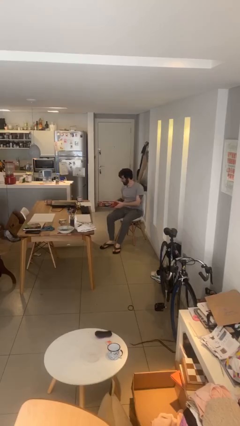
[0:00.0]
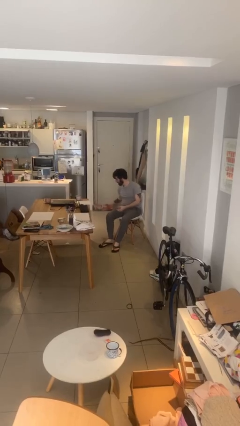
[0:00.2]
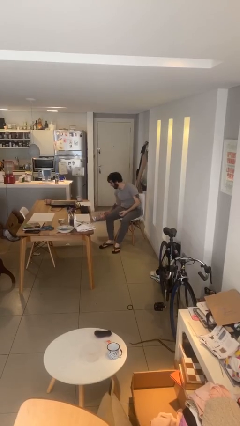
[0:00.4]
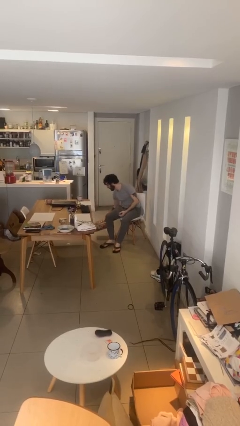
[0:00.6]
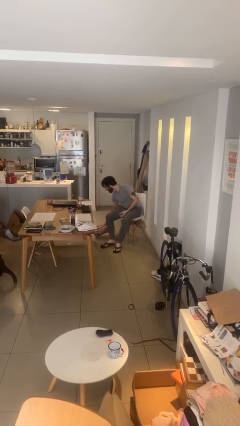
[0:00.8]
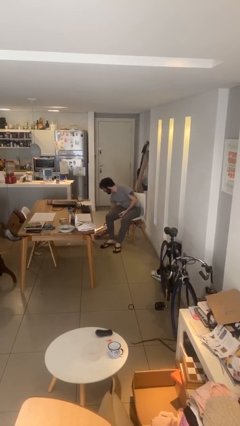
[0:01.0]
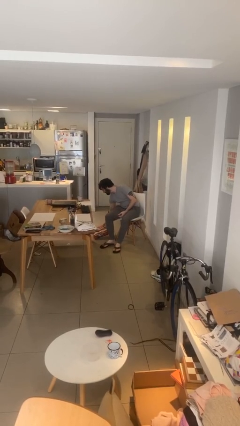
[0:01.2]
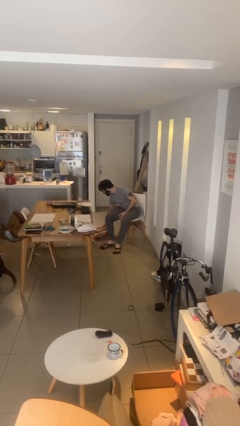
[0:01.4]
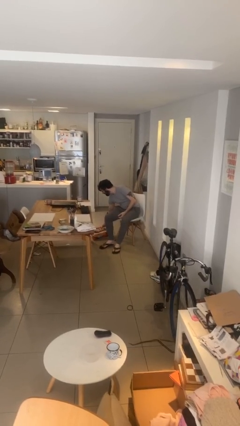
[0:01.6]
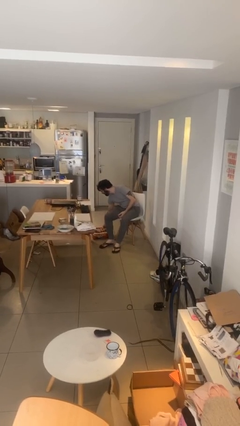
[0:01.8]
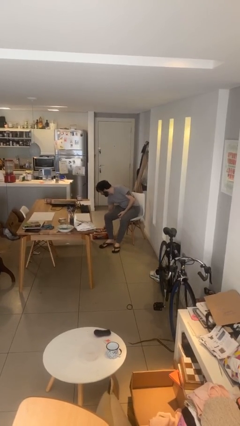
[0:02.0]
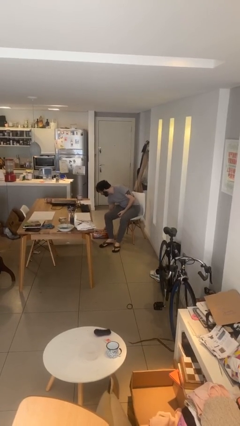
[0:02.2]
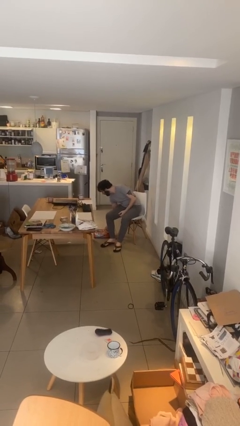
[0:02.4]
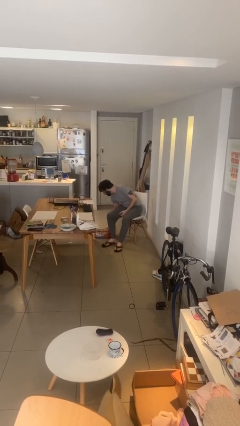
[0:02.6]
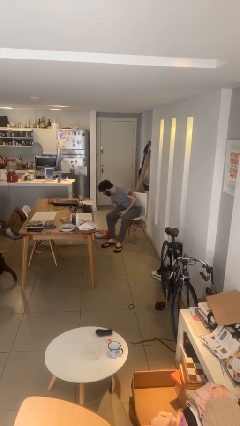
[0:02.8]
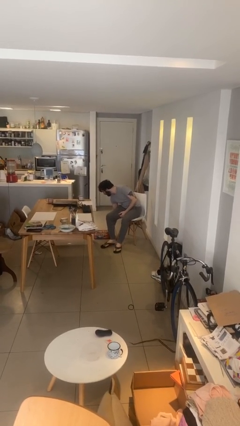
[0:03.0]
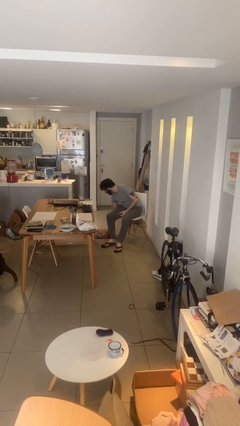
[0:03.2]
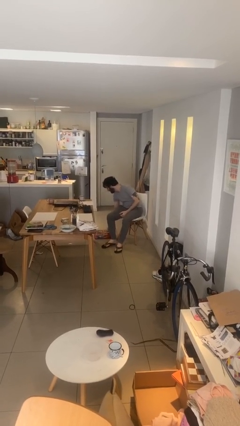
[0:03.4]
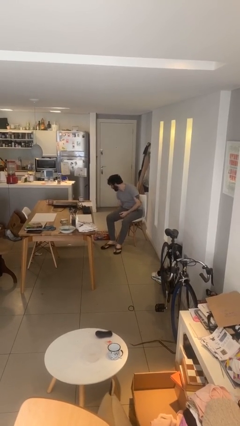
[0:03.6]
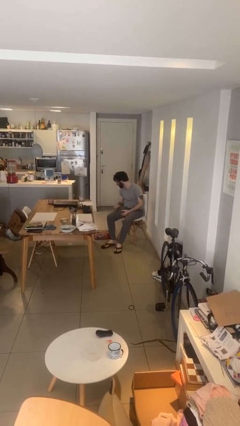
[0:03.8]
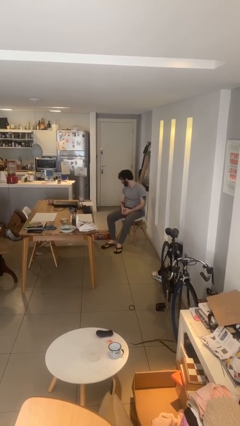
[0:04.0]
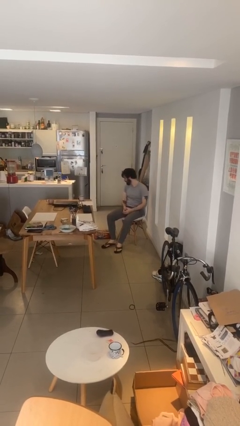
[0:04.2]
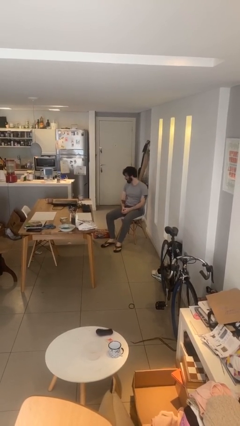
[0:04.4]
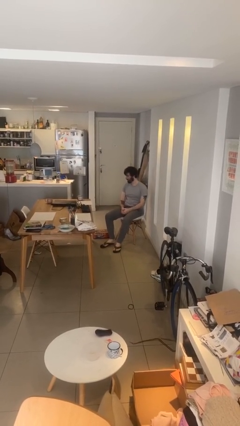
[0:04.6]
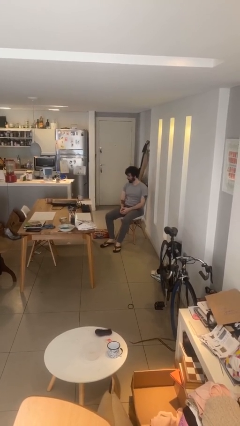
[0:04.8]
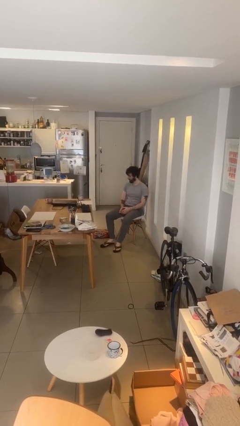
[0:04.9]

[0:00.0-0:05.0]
person puts down object on floor

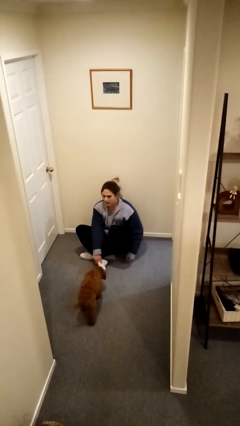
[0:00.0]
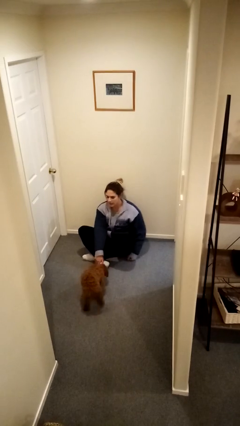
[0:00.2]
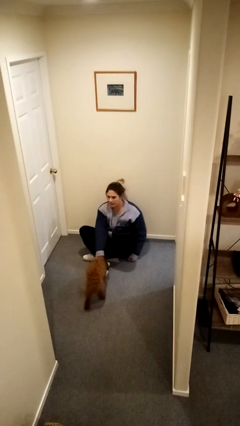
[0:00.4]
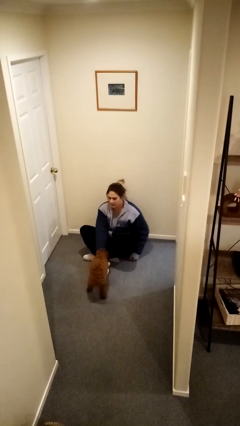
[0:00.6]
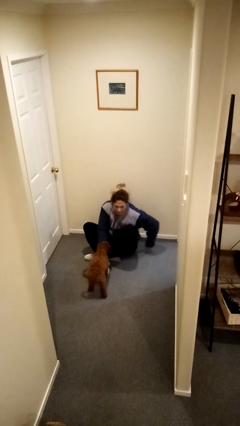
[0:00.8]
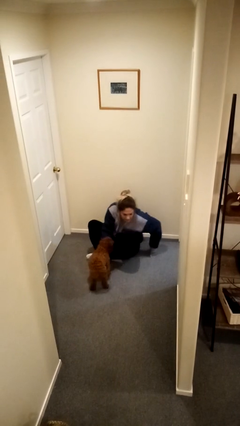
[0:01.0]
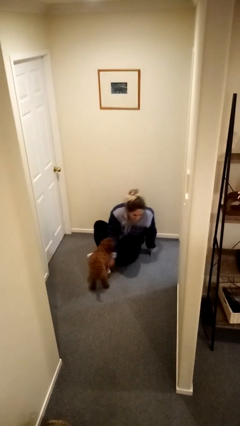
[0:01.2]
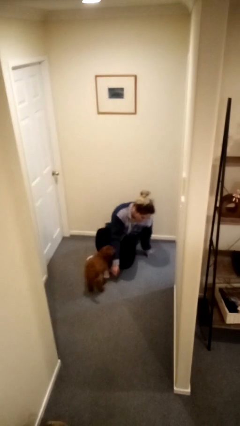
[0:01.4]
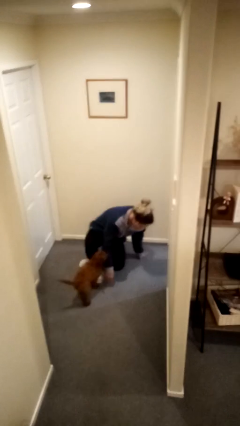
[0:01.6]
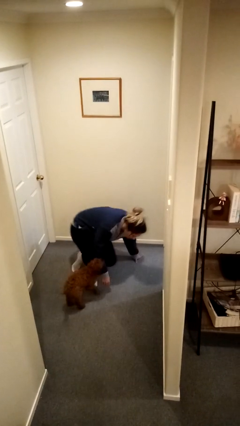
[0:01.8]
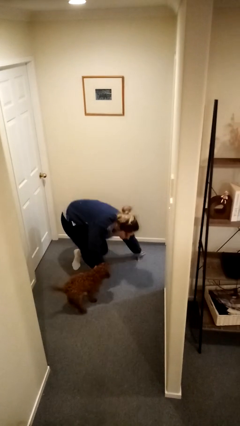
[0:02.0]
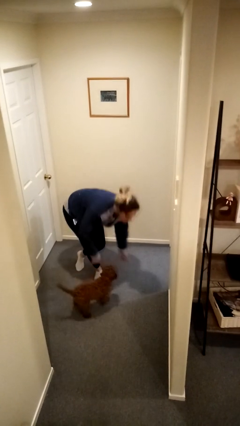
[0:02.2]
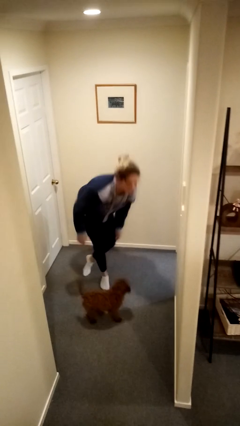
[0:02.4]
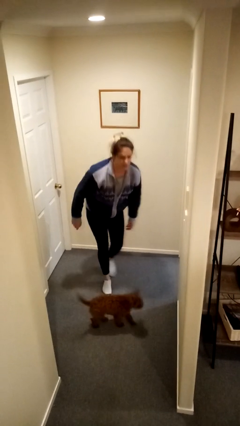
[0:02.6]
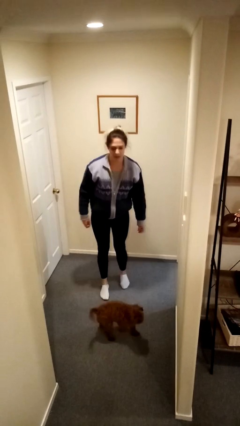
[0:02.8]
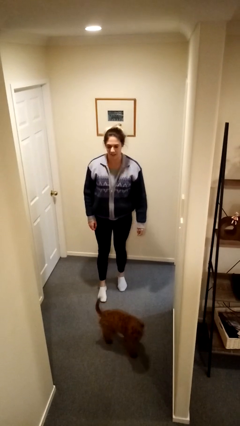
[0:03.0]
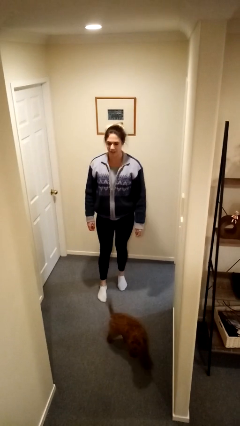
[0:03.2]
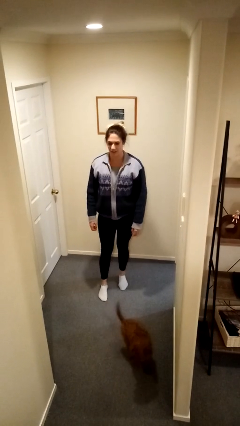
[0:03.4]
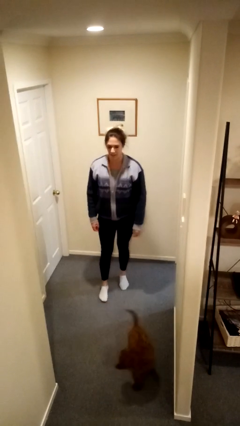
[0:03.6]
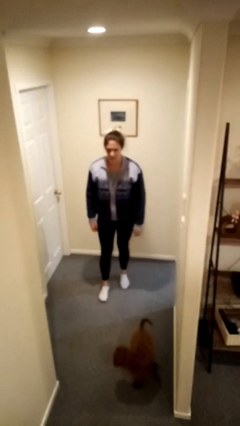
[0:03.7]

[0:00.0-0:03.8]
person stands up from floor

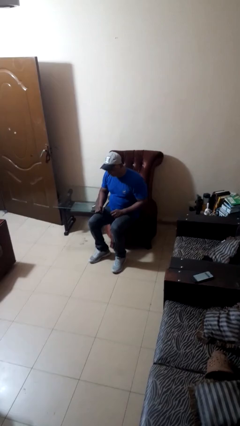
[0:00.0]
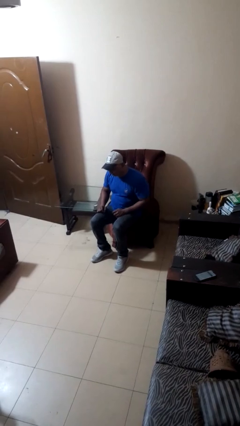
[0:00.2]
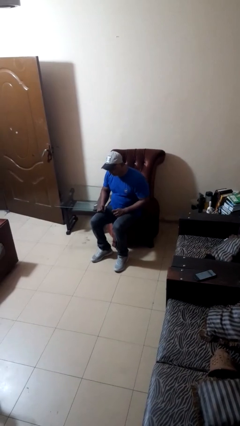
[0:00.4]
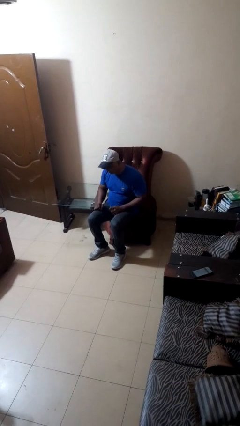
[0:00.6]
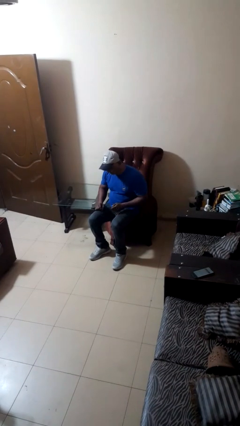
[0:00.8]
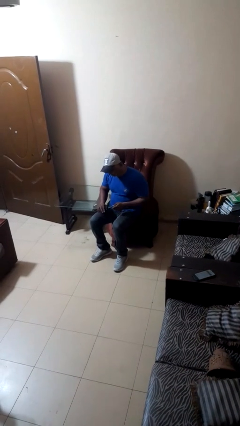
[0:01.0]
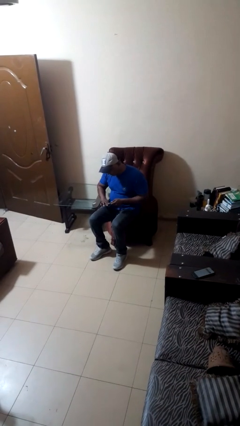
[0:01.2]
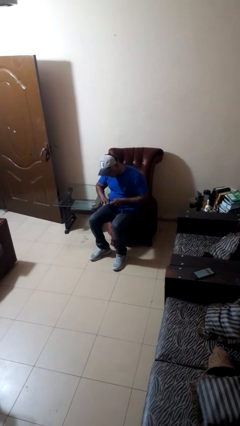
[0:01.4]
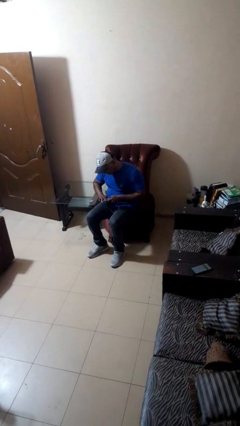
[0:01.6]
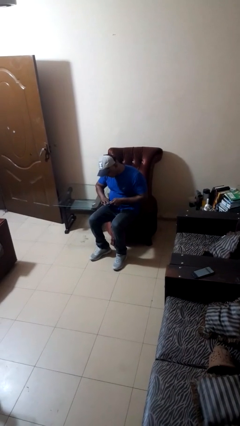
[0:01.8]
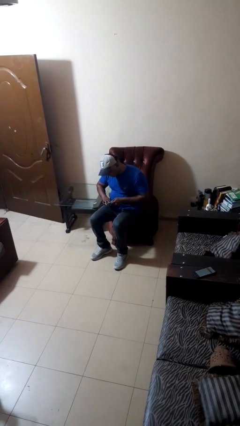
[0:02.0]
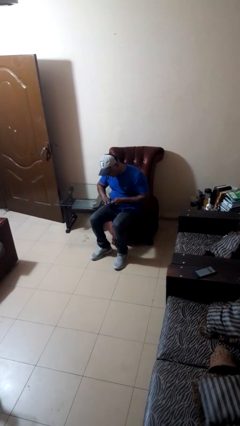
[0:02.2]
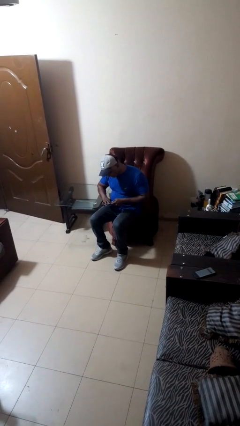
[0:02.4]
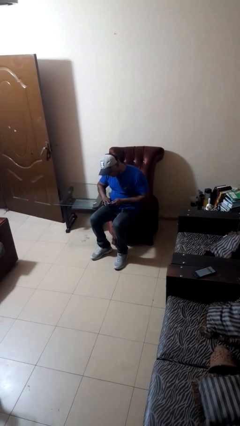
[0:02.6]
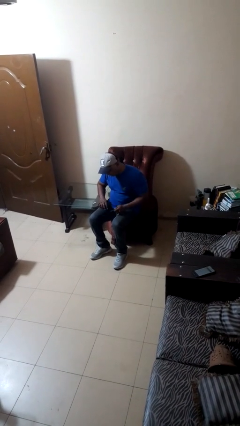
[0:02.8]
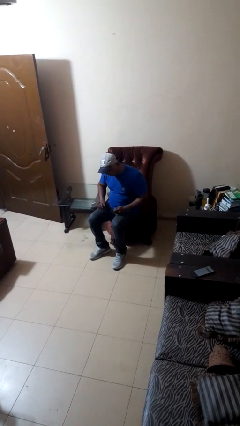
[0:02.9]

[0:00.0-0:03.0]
person files fingernails

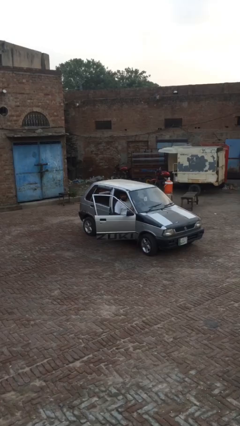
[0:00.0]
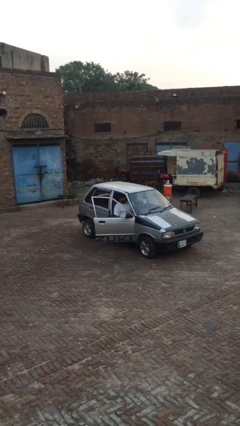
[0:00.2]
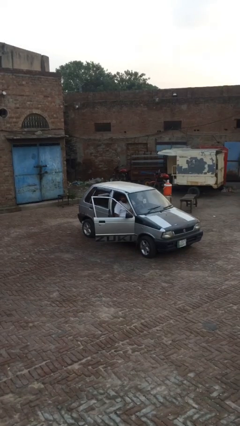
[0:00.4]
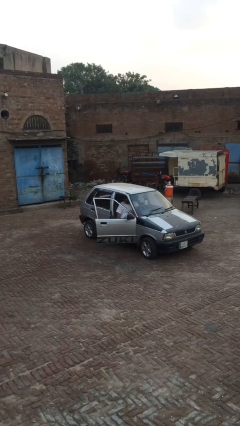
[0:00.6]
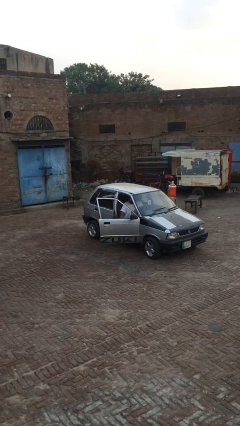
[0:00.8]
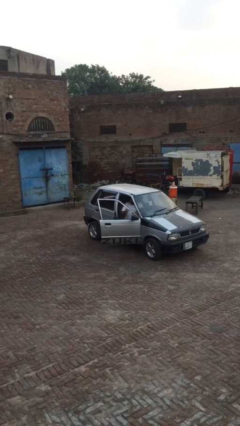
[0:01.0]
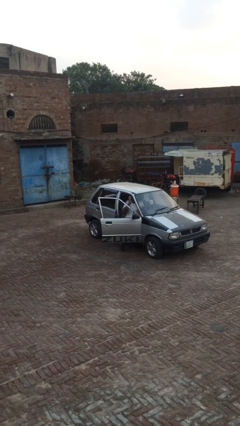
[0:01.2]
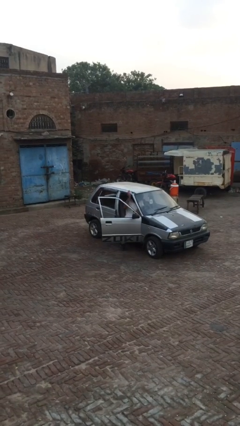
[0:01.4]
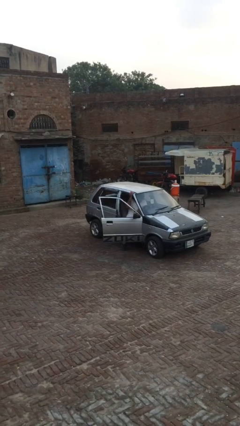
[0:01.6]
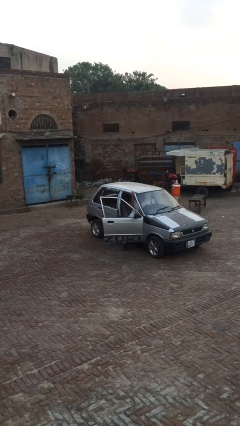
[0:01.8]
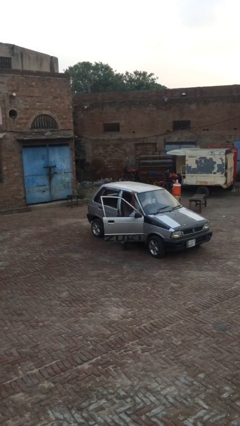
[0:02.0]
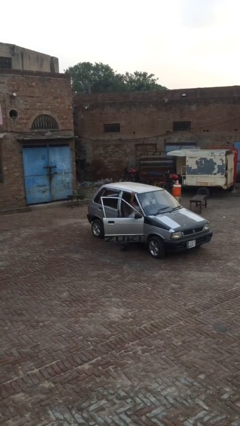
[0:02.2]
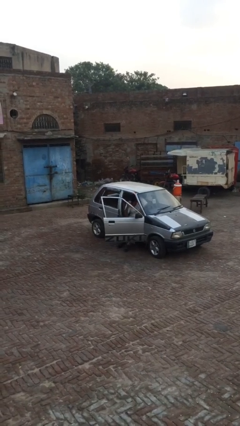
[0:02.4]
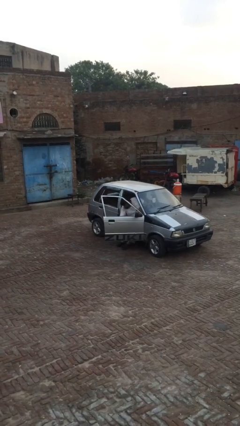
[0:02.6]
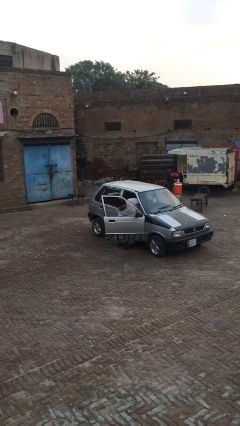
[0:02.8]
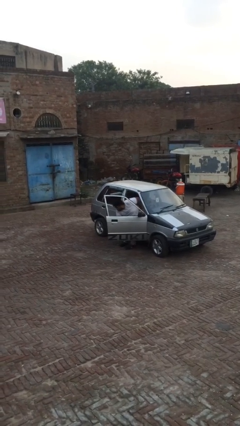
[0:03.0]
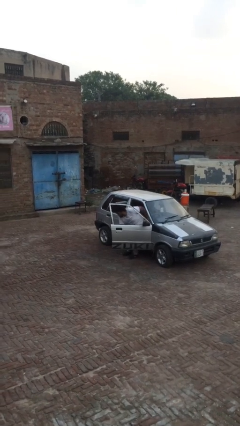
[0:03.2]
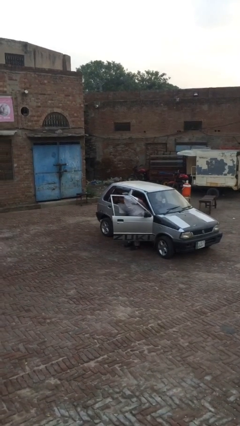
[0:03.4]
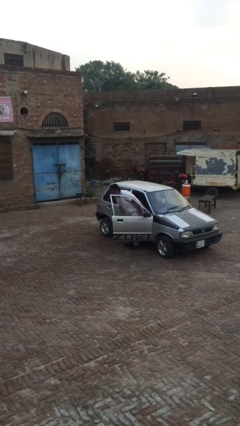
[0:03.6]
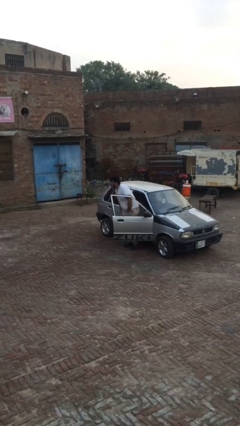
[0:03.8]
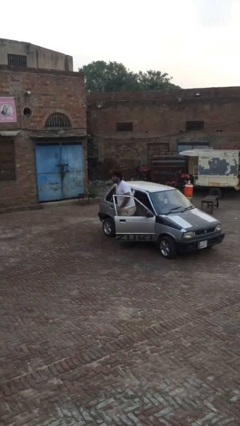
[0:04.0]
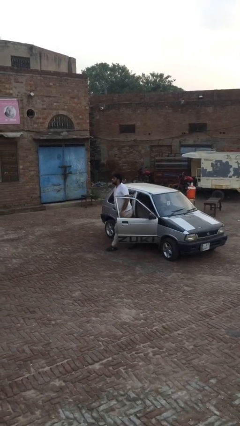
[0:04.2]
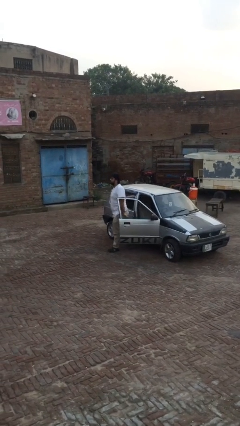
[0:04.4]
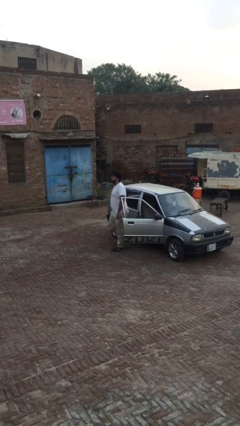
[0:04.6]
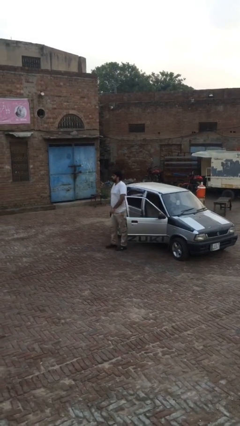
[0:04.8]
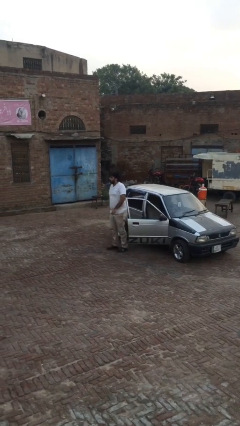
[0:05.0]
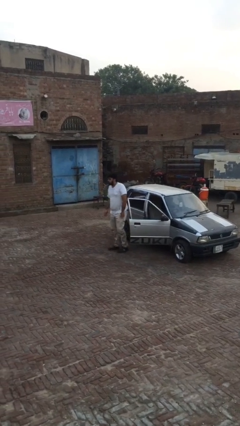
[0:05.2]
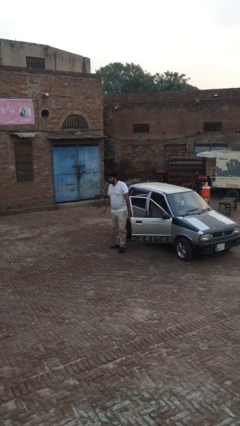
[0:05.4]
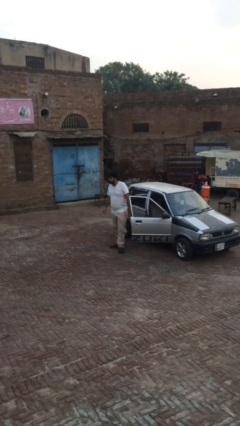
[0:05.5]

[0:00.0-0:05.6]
person exits car
